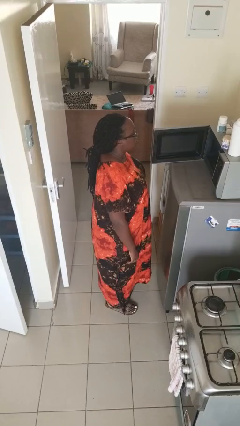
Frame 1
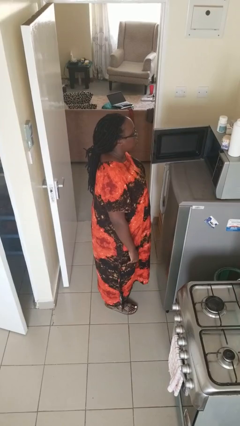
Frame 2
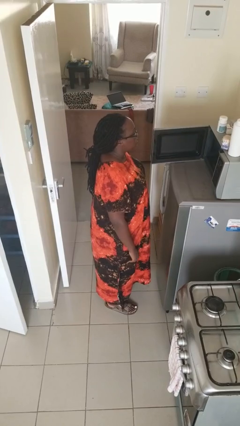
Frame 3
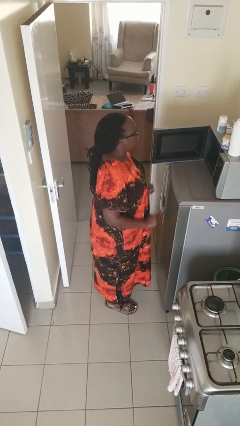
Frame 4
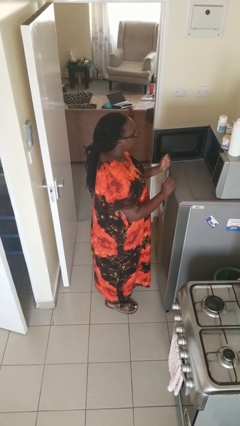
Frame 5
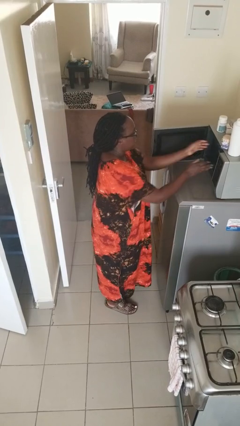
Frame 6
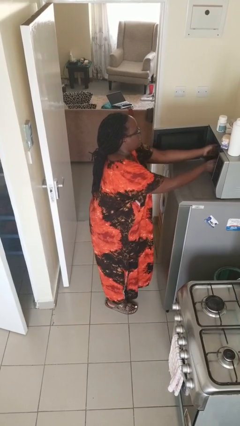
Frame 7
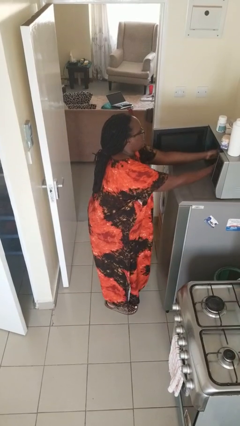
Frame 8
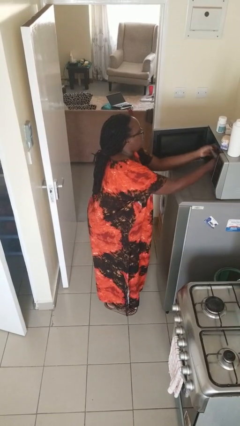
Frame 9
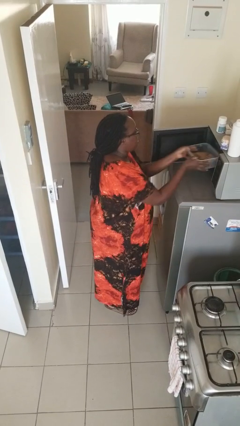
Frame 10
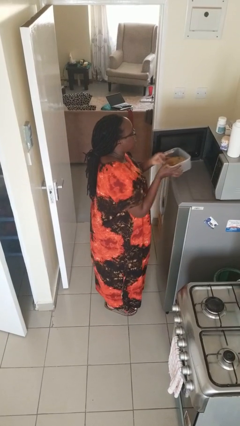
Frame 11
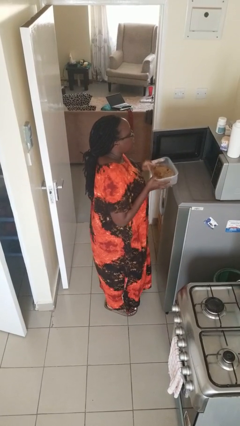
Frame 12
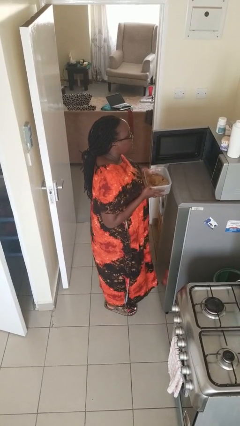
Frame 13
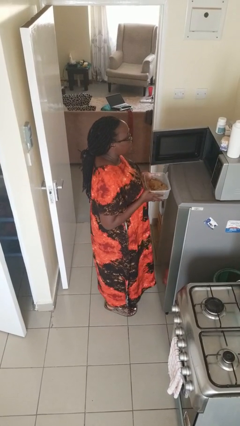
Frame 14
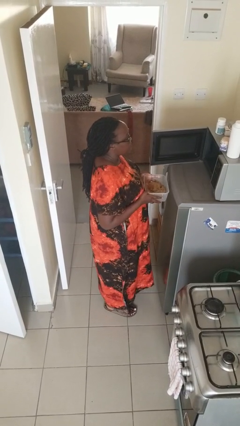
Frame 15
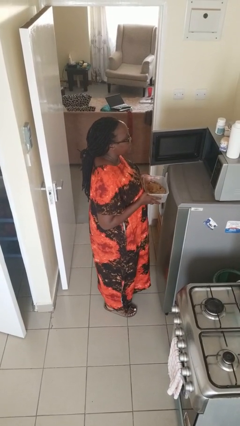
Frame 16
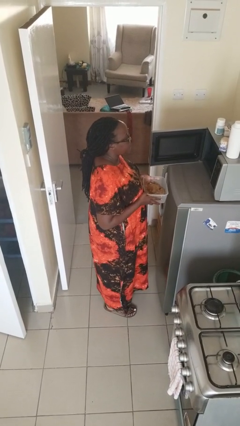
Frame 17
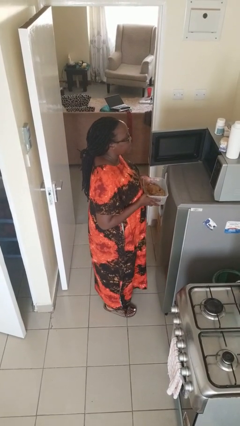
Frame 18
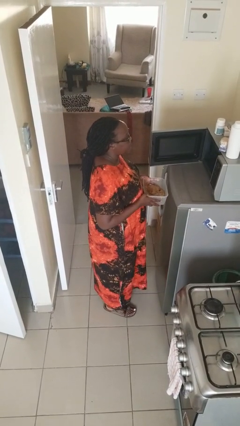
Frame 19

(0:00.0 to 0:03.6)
person takes object from microwave

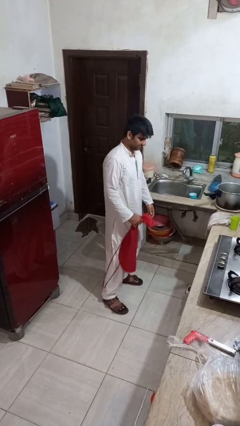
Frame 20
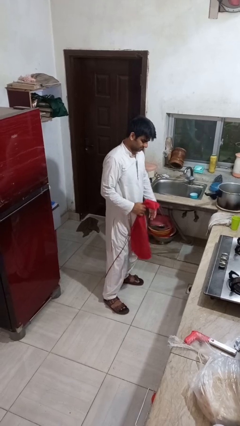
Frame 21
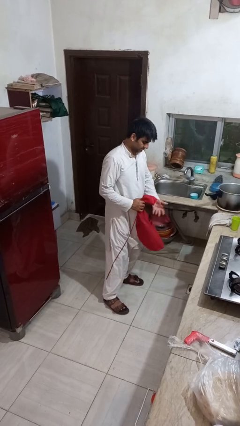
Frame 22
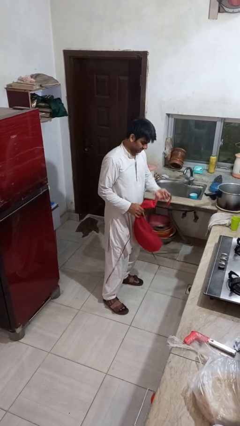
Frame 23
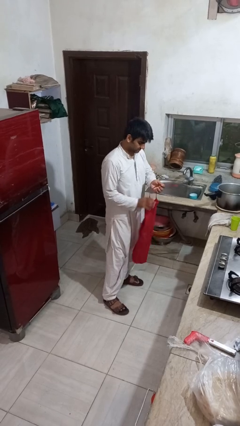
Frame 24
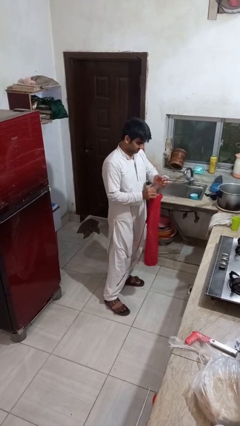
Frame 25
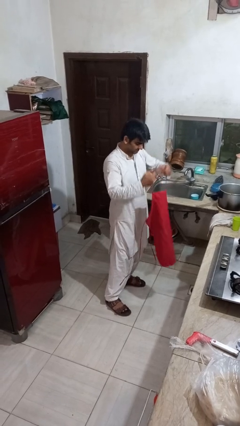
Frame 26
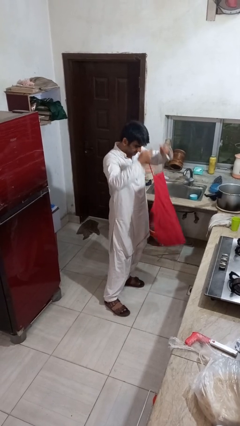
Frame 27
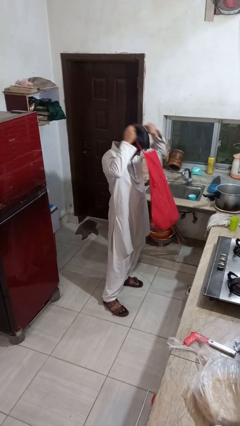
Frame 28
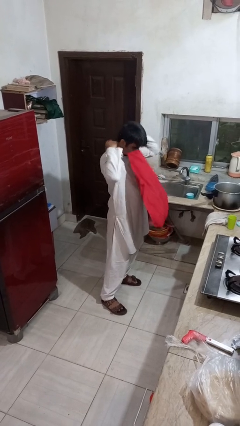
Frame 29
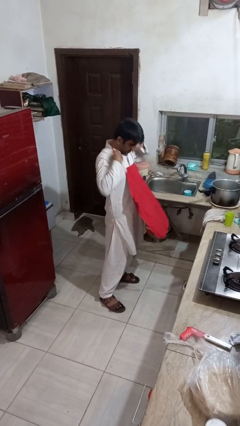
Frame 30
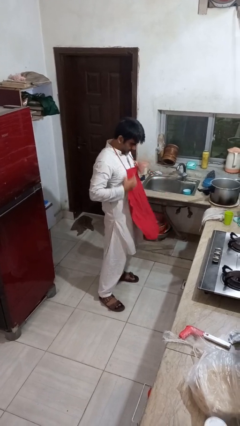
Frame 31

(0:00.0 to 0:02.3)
person puts on apron

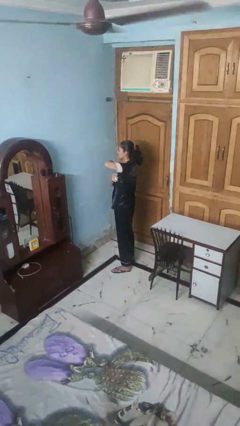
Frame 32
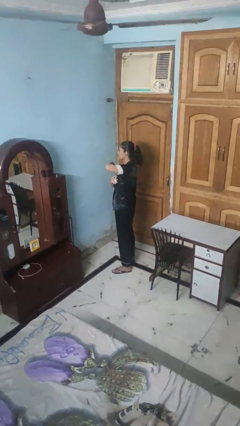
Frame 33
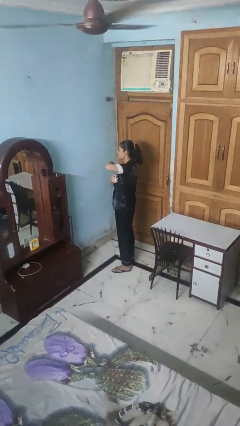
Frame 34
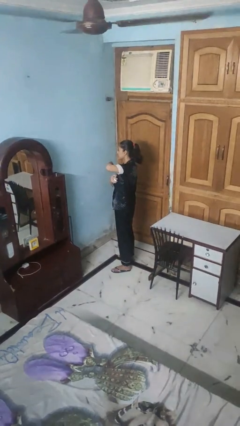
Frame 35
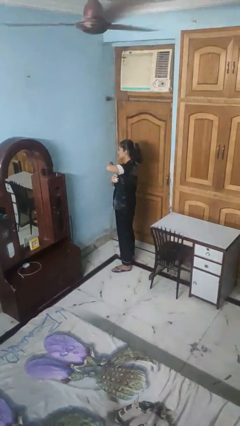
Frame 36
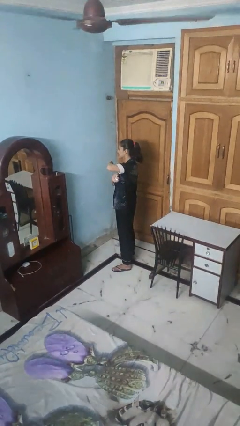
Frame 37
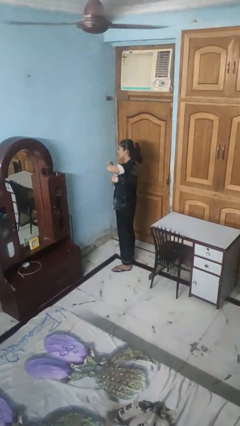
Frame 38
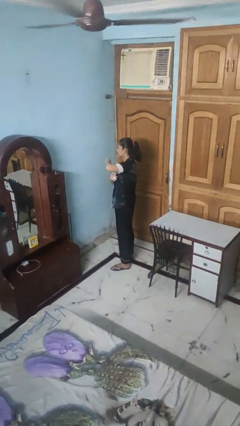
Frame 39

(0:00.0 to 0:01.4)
person applies deodorant

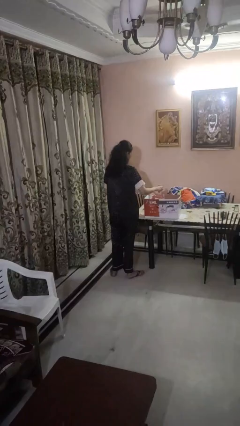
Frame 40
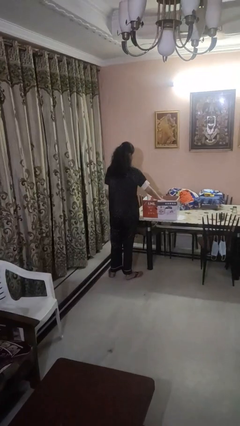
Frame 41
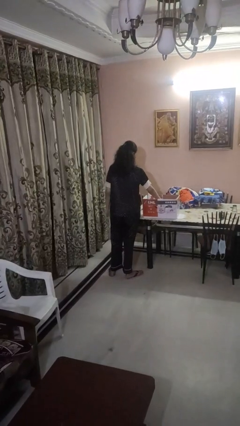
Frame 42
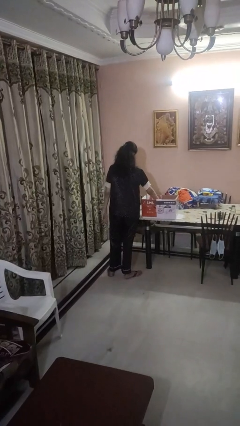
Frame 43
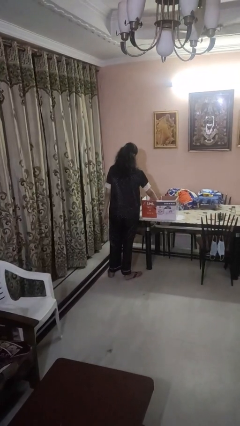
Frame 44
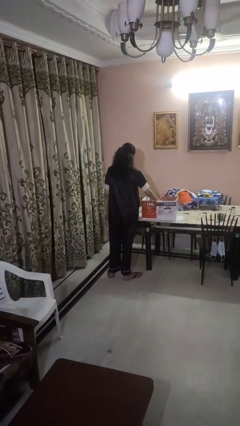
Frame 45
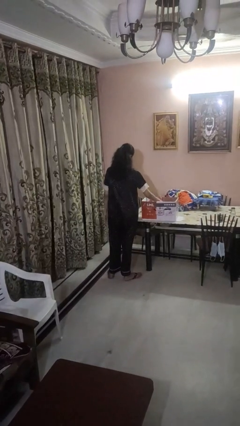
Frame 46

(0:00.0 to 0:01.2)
person puts object into box

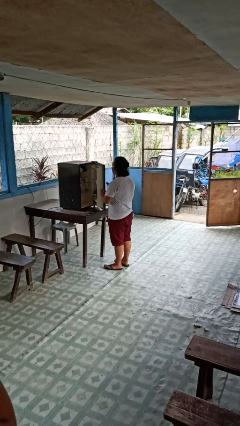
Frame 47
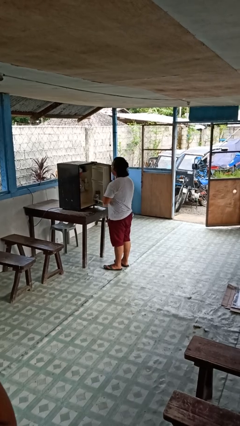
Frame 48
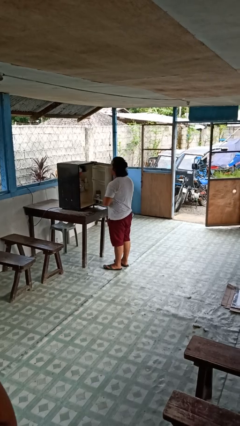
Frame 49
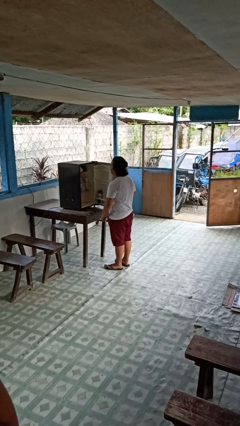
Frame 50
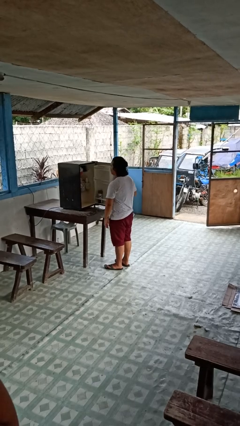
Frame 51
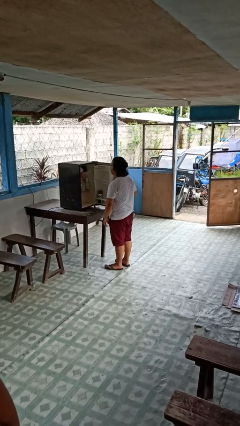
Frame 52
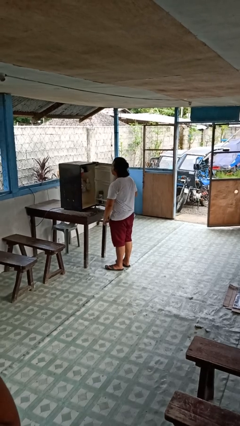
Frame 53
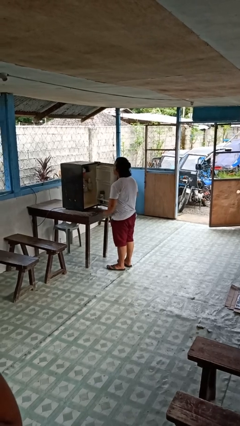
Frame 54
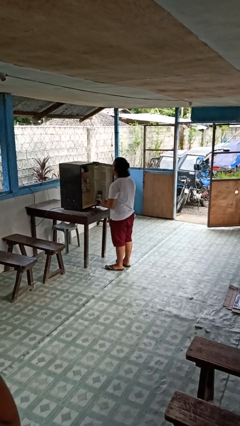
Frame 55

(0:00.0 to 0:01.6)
person opens refrigerator

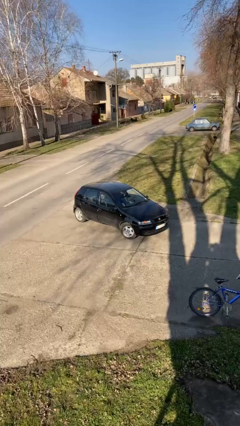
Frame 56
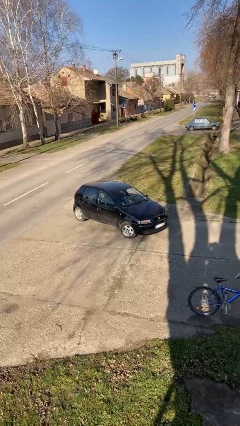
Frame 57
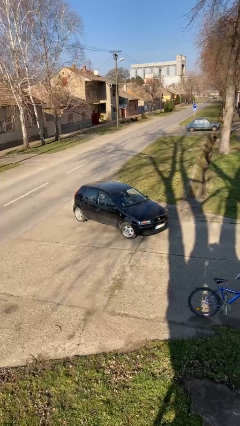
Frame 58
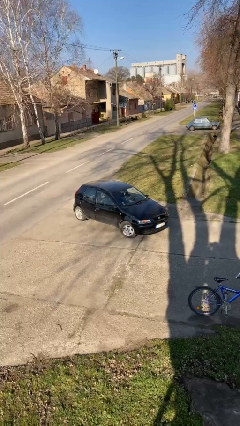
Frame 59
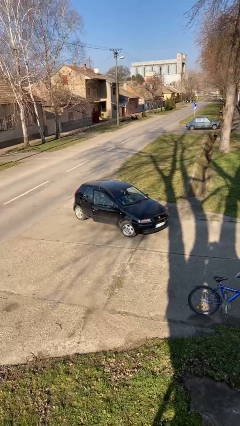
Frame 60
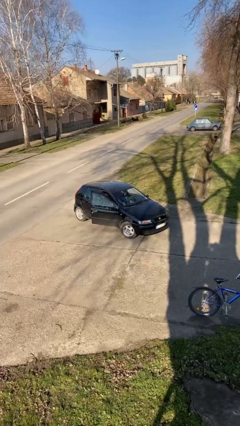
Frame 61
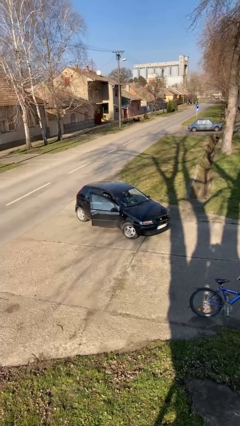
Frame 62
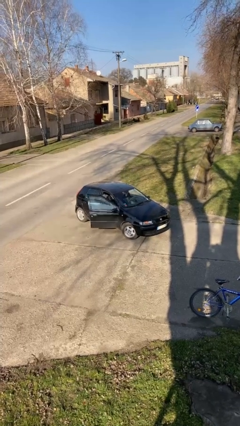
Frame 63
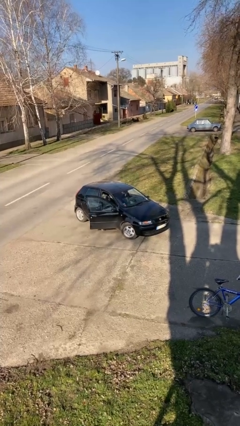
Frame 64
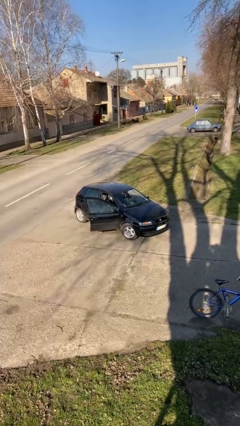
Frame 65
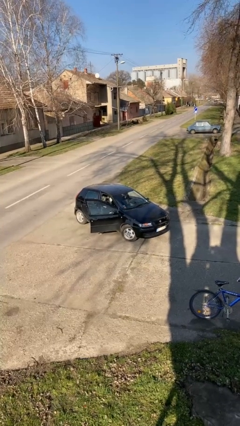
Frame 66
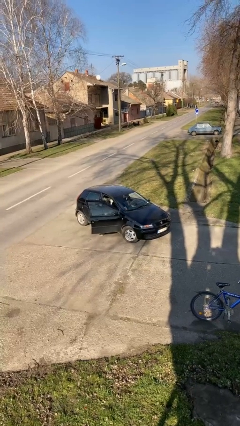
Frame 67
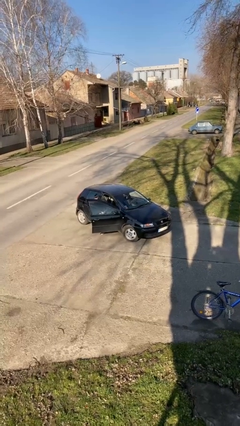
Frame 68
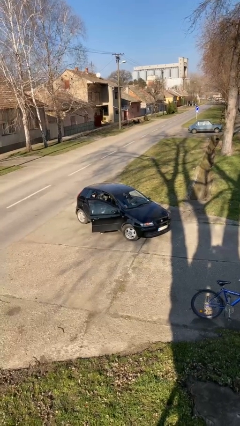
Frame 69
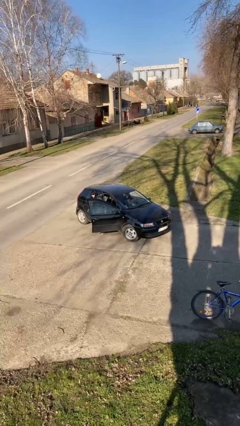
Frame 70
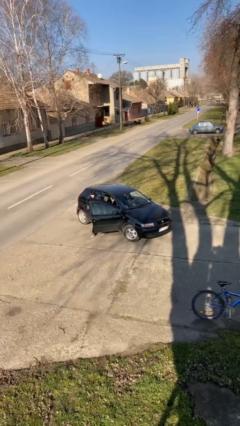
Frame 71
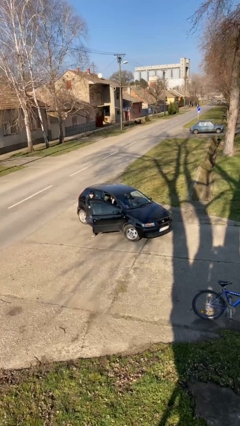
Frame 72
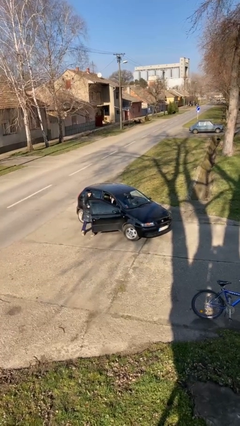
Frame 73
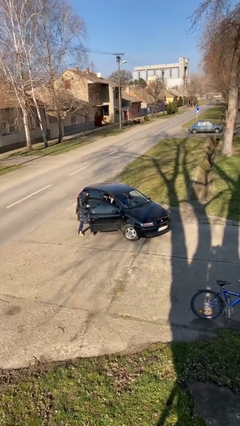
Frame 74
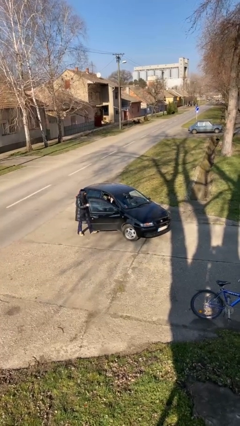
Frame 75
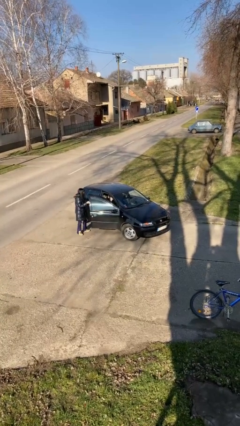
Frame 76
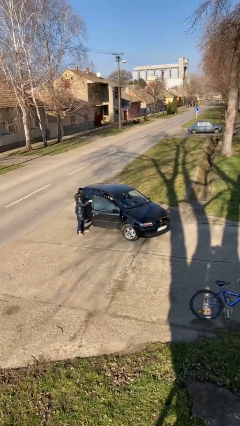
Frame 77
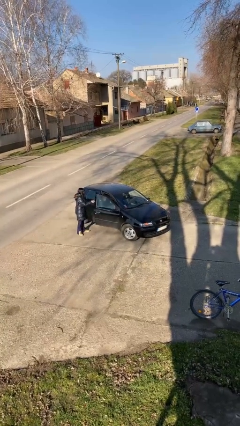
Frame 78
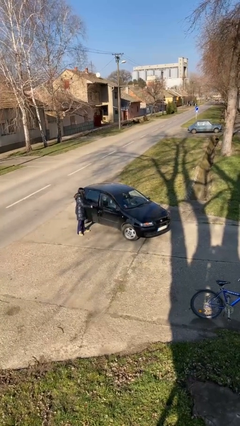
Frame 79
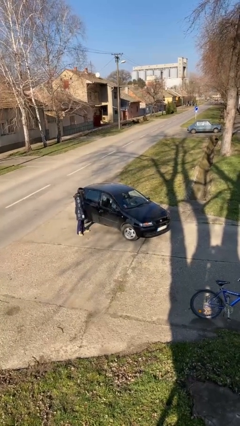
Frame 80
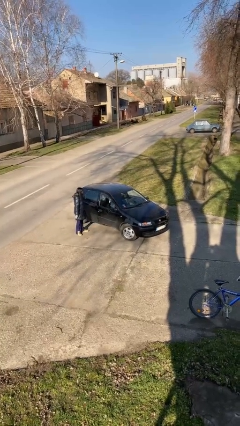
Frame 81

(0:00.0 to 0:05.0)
car drops off person

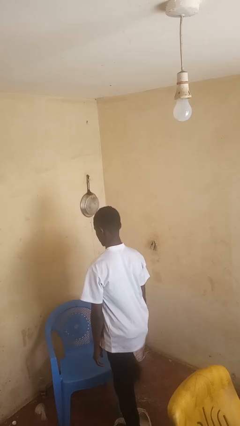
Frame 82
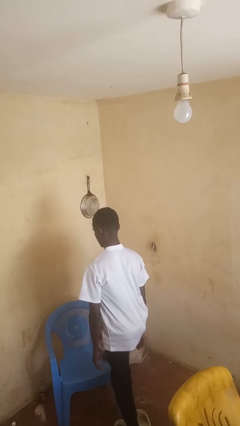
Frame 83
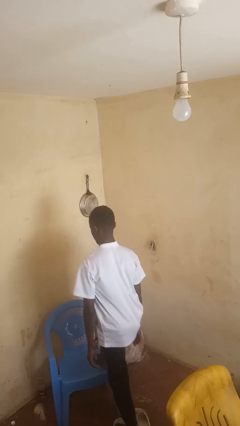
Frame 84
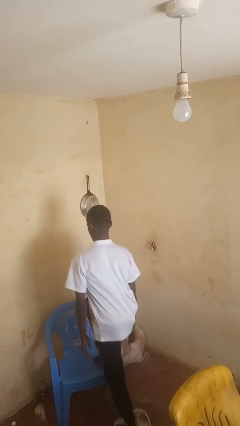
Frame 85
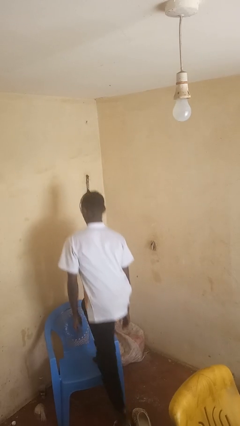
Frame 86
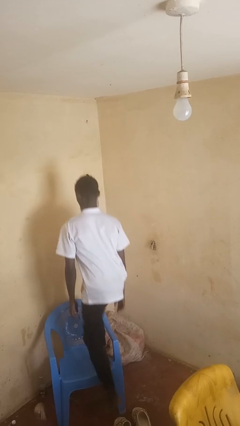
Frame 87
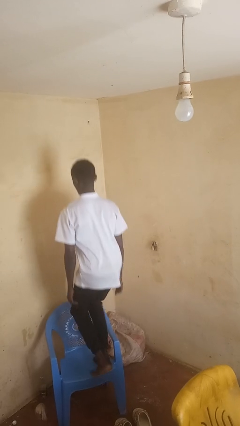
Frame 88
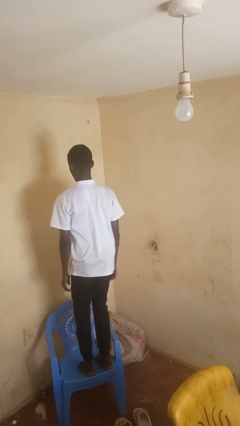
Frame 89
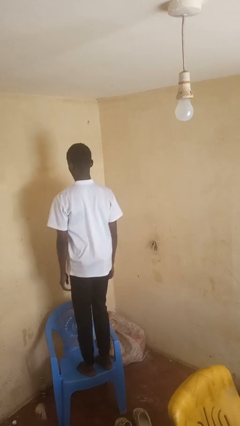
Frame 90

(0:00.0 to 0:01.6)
person climbs on chair

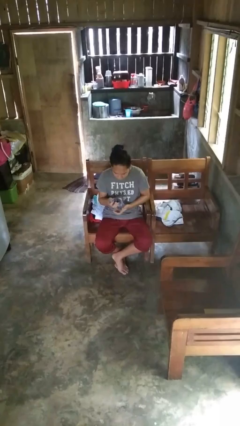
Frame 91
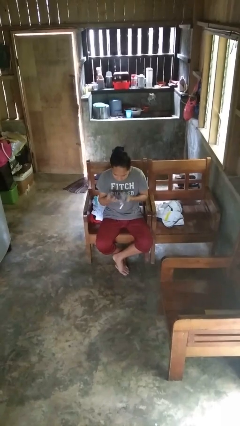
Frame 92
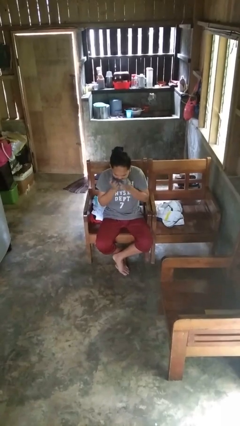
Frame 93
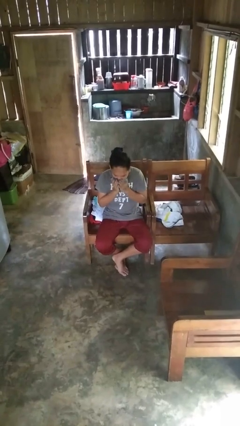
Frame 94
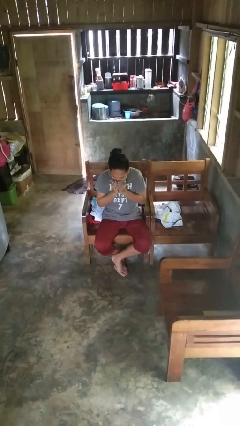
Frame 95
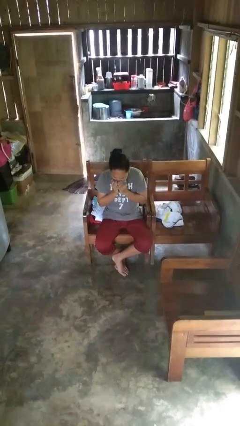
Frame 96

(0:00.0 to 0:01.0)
person blows nose
